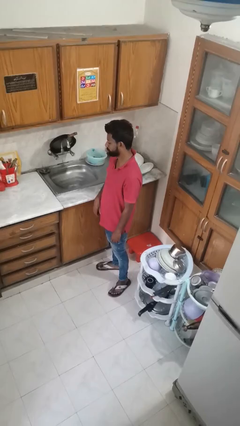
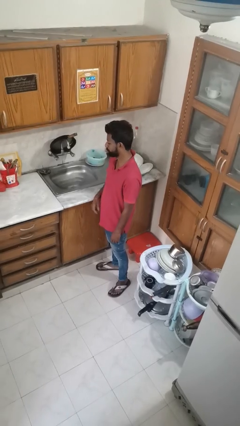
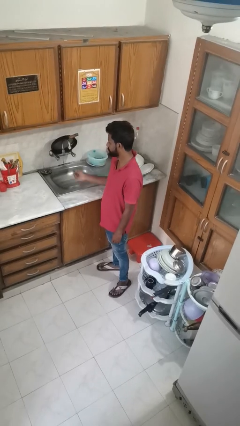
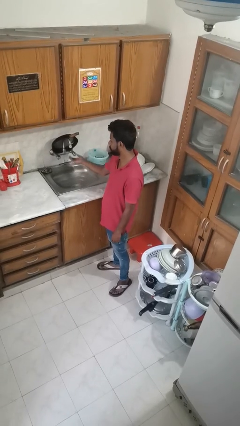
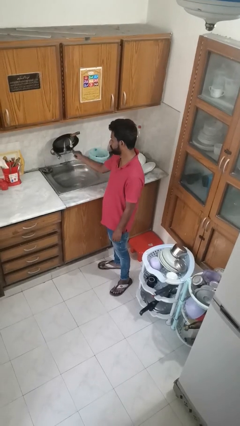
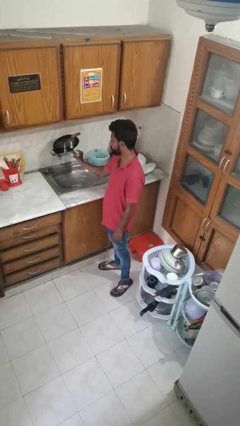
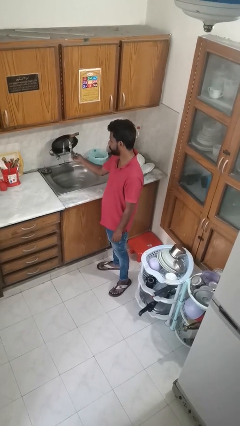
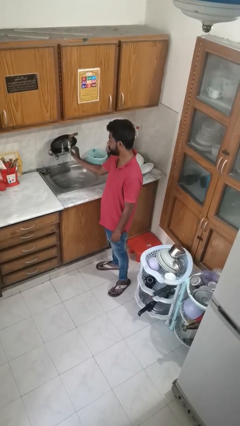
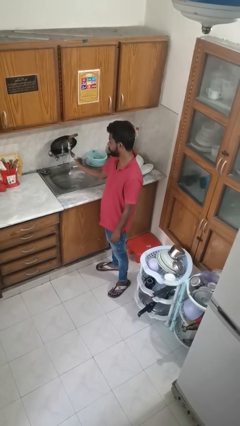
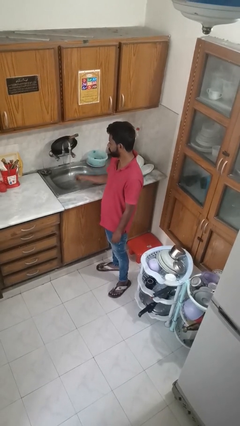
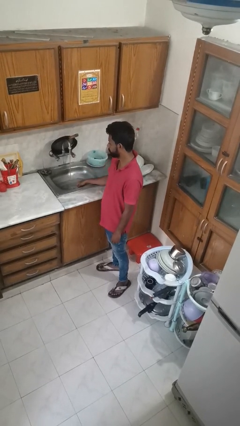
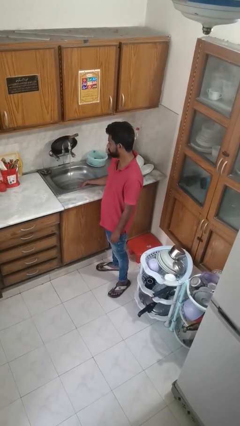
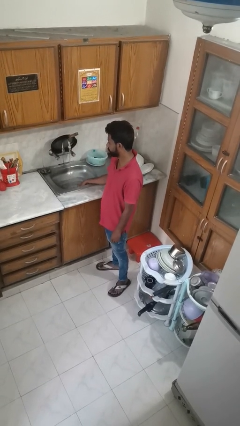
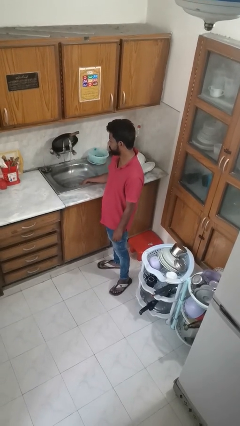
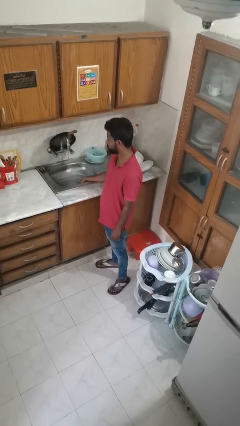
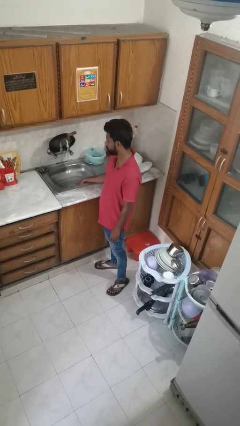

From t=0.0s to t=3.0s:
person turns on faucet

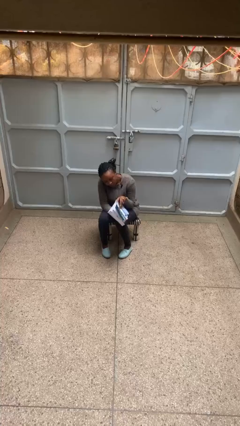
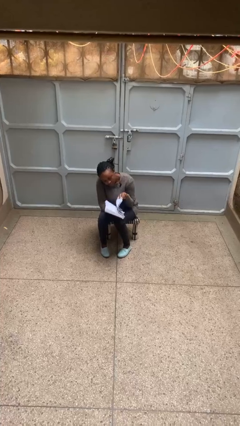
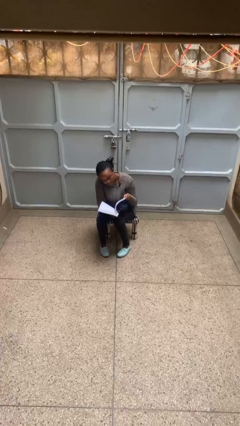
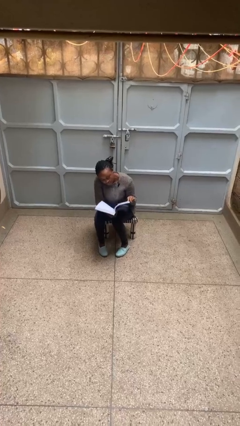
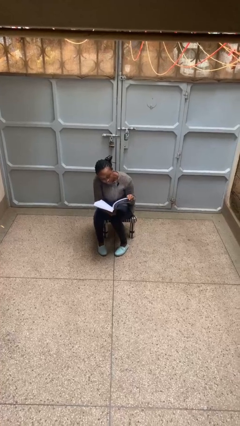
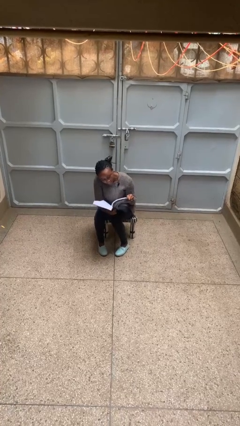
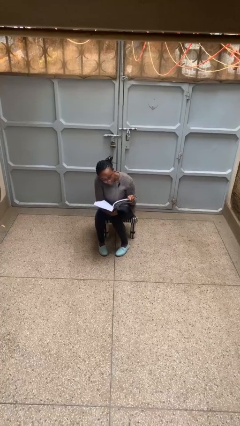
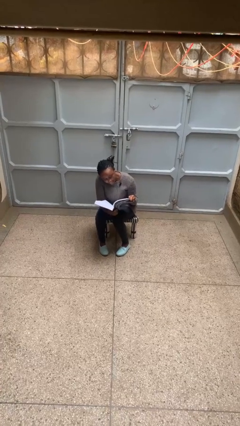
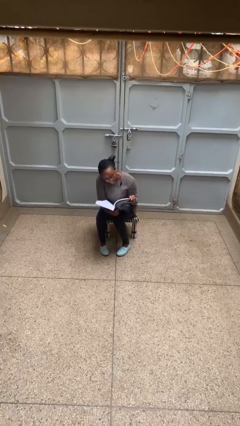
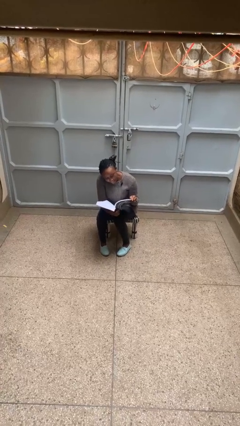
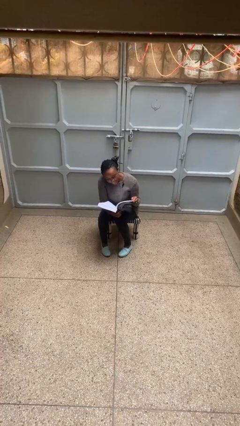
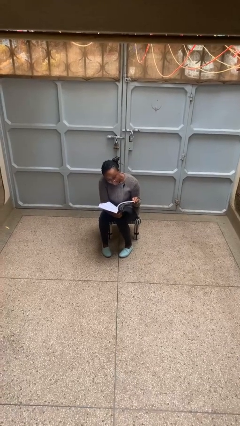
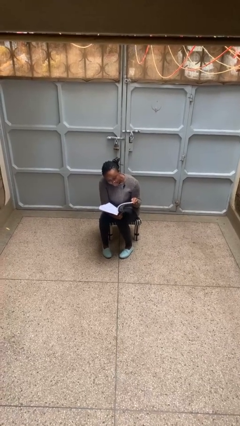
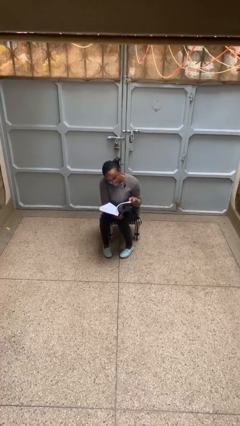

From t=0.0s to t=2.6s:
person reads book

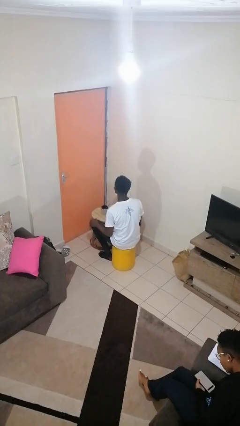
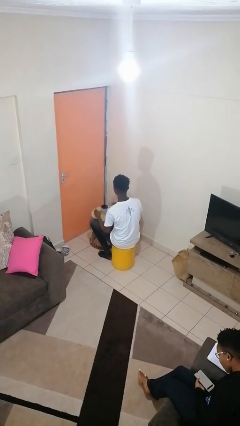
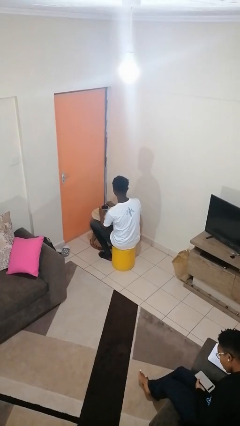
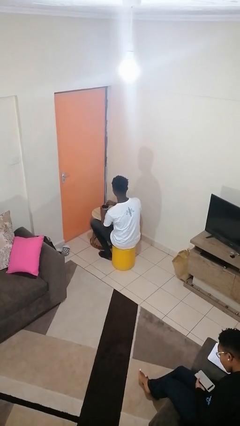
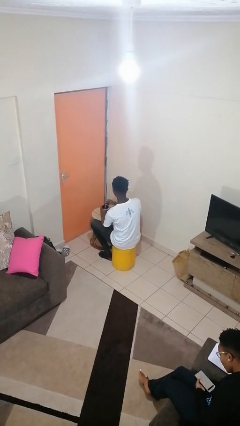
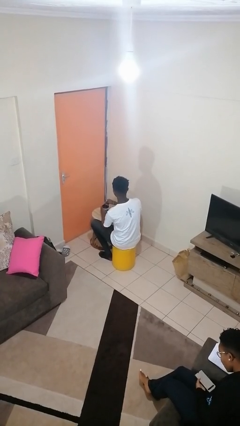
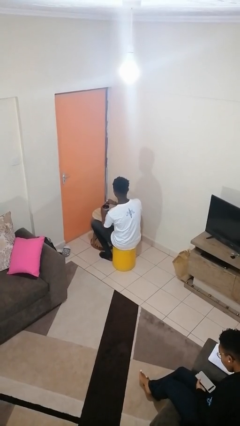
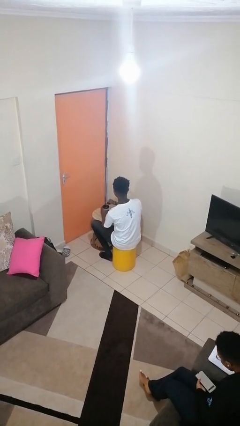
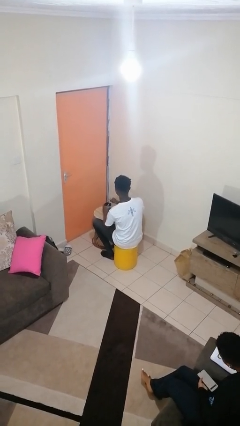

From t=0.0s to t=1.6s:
person stirs mug

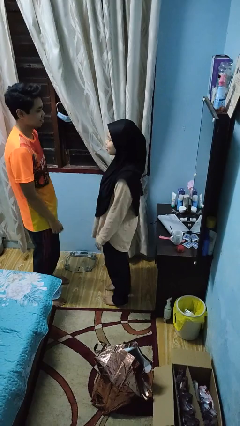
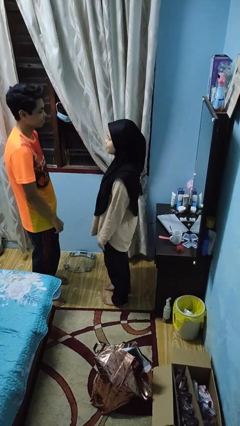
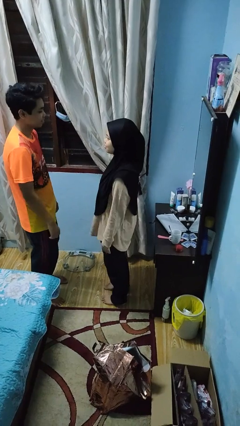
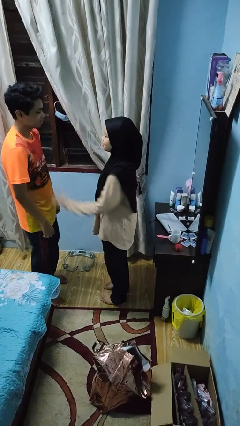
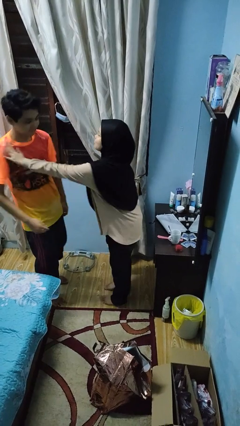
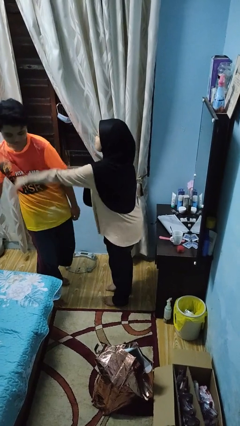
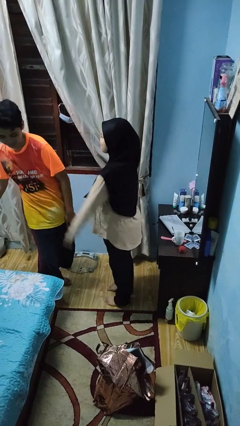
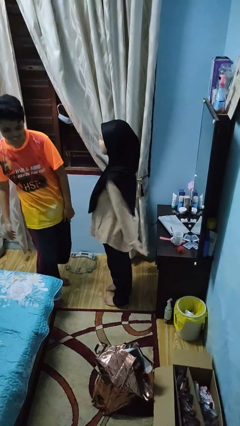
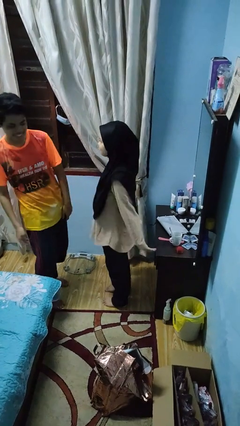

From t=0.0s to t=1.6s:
person shoves person

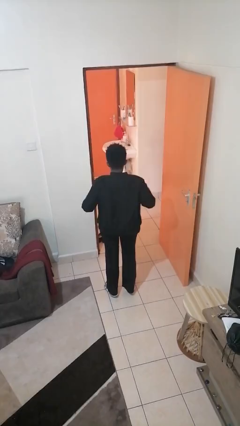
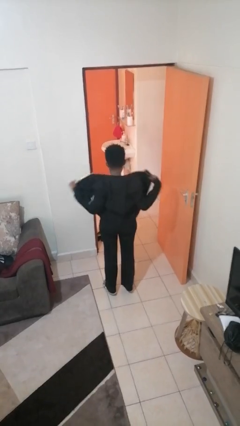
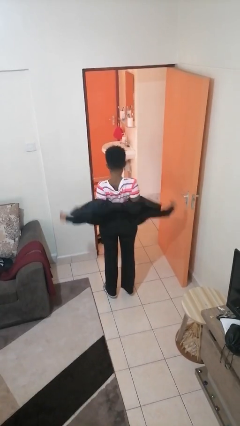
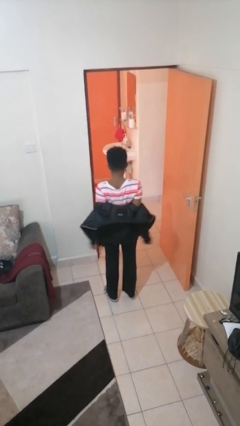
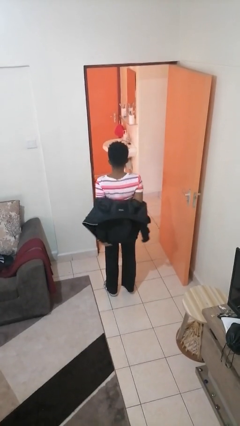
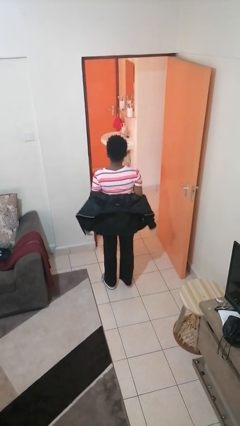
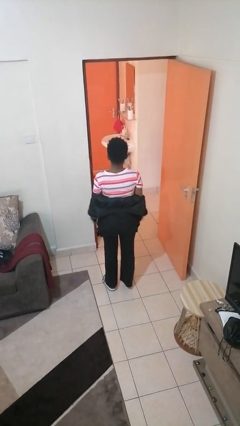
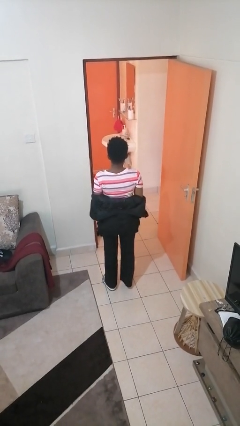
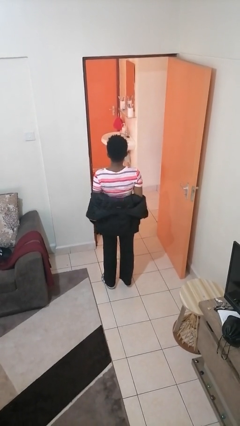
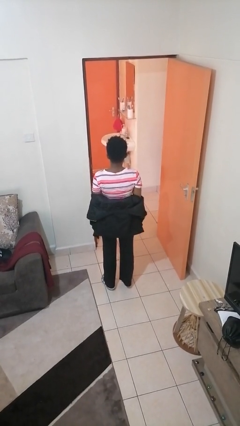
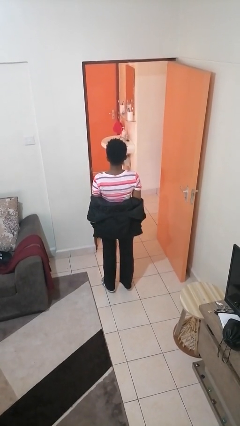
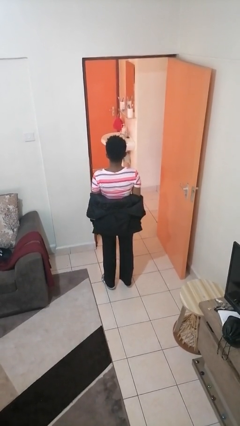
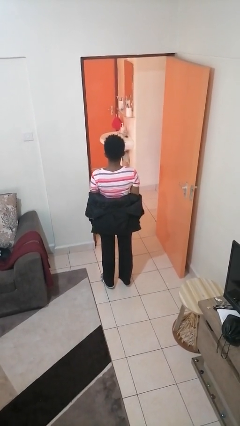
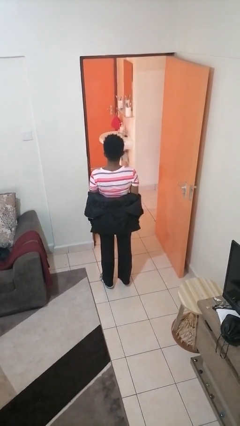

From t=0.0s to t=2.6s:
person takes off jacket

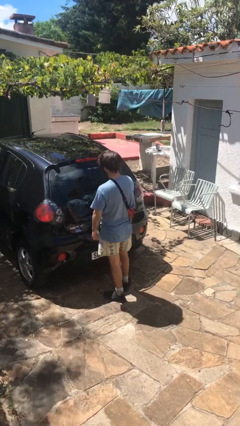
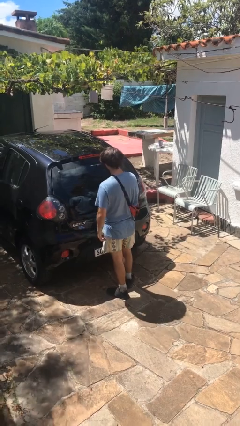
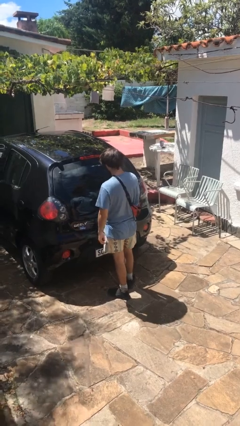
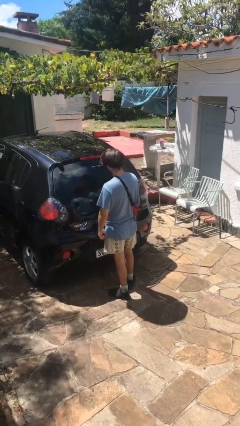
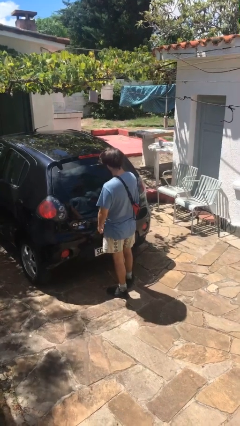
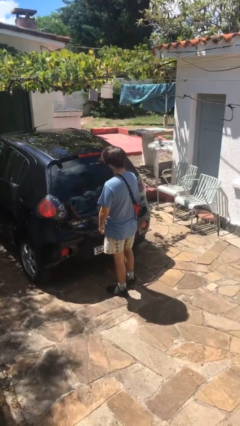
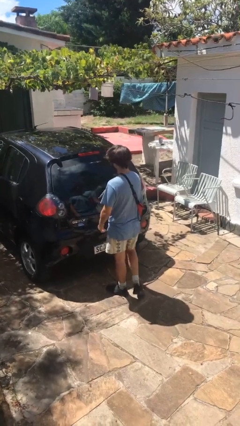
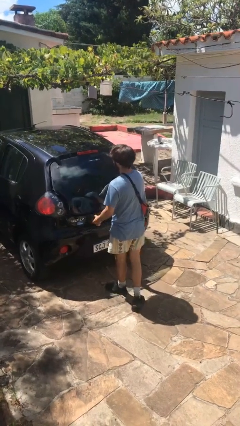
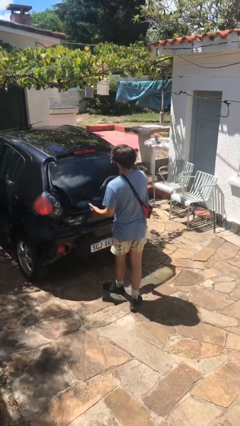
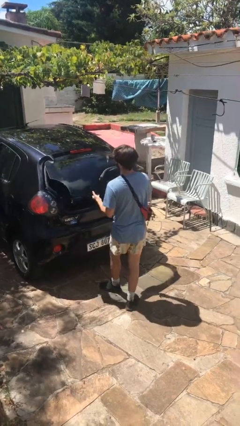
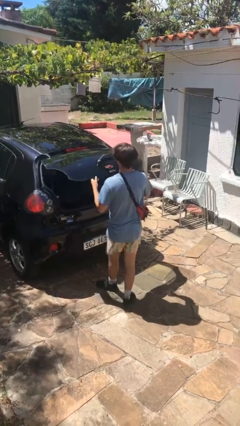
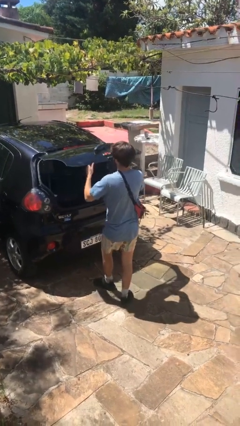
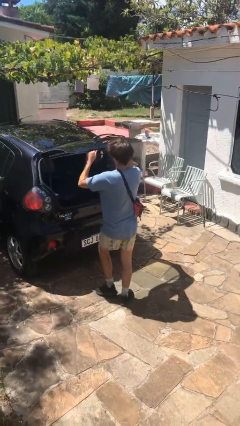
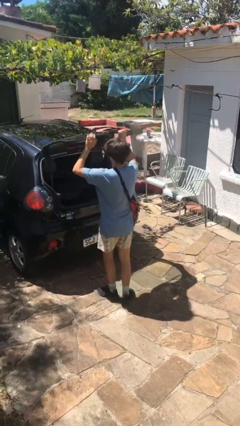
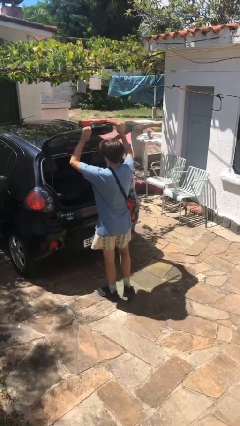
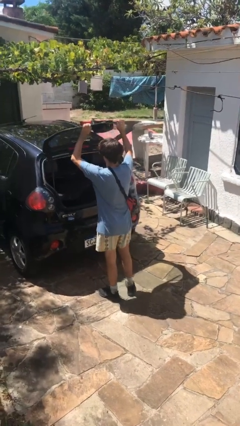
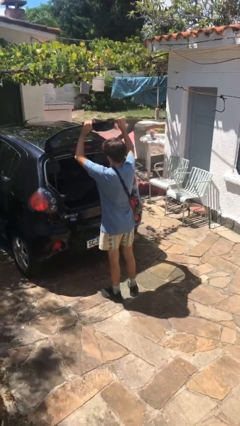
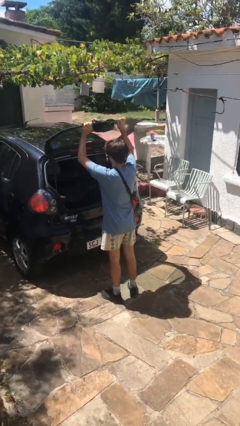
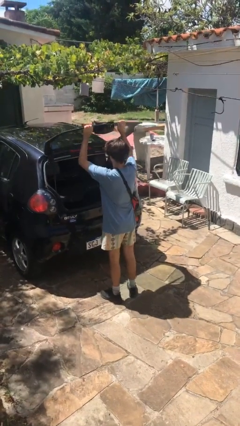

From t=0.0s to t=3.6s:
person opens car trunk

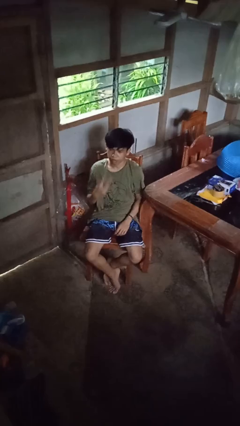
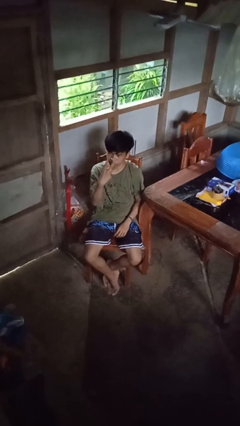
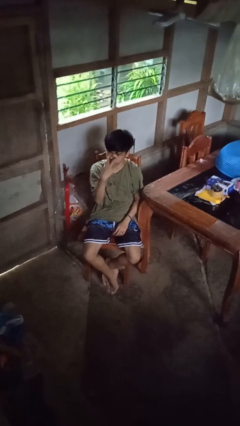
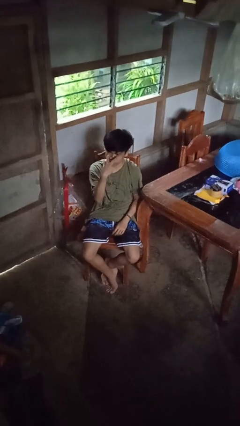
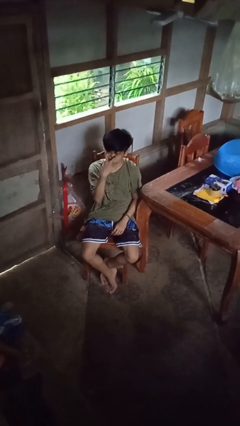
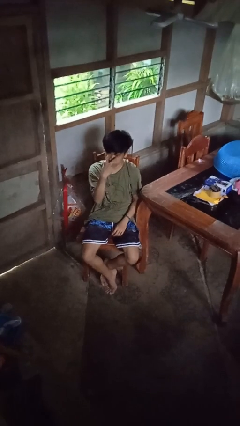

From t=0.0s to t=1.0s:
person gestures watch closely

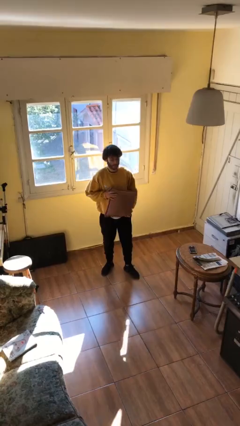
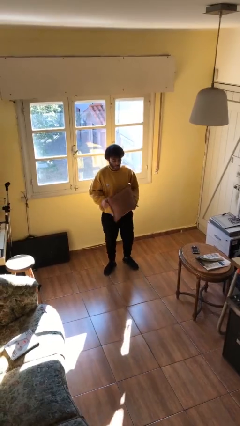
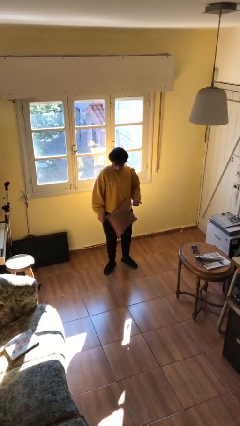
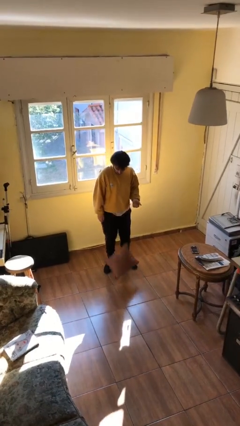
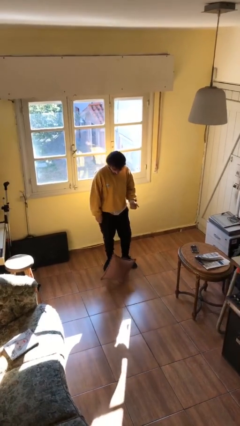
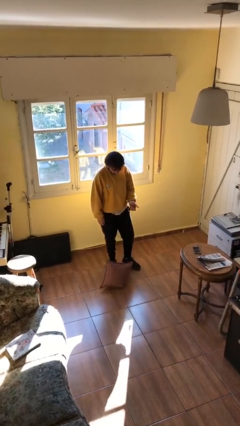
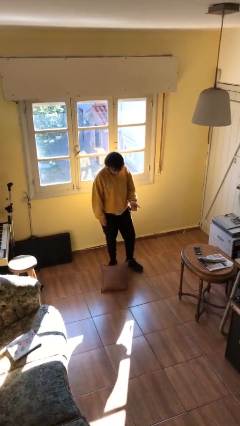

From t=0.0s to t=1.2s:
person drops object
